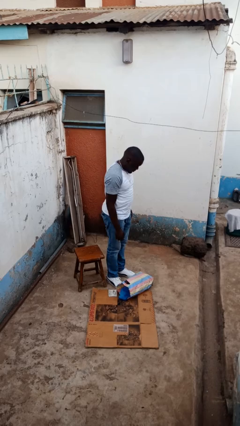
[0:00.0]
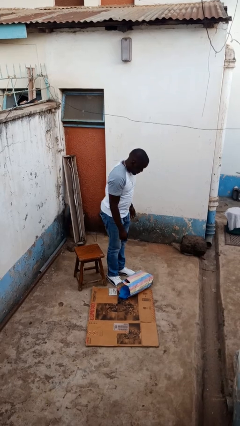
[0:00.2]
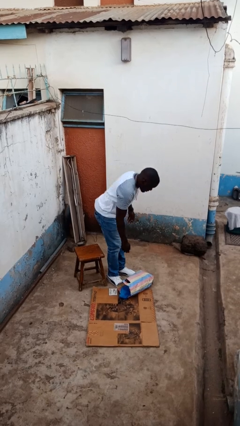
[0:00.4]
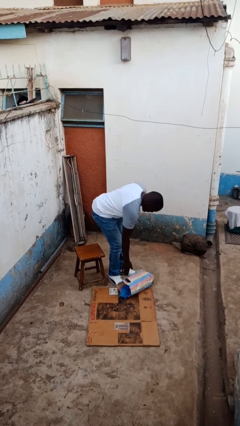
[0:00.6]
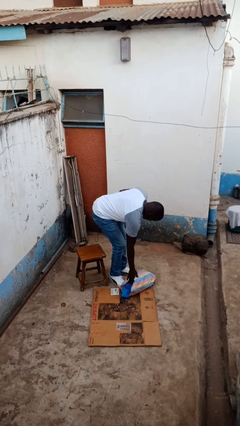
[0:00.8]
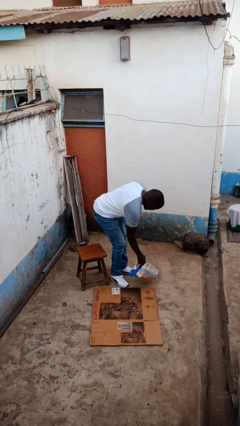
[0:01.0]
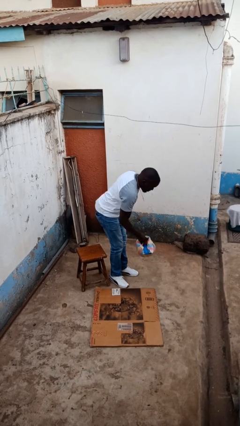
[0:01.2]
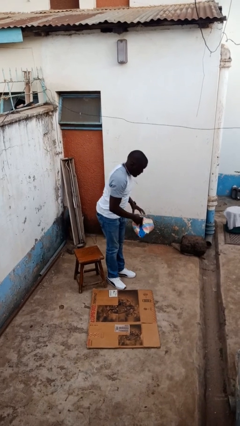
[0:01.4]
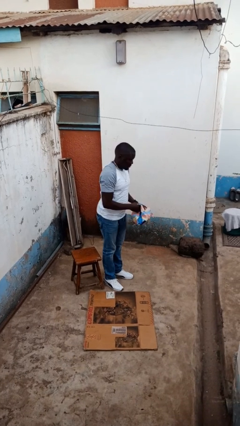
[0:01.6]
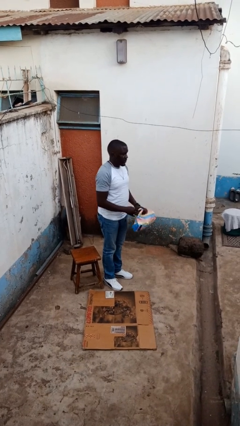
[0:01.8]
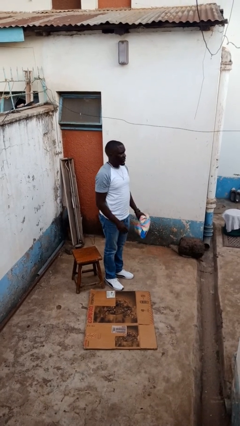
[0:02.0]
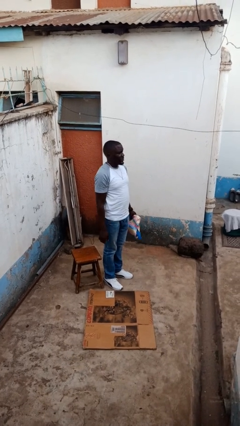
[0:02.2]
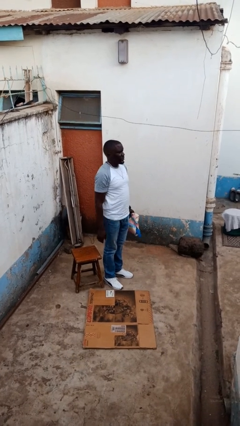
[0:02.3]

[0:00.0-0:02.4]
person picks up object from floor

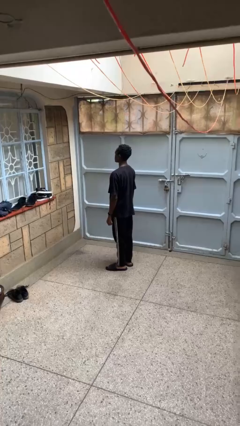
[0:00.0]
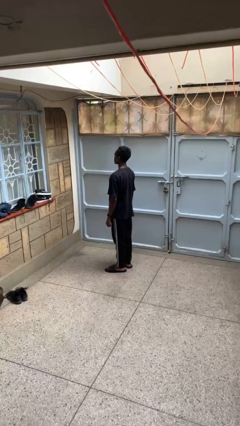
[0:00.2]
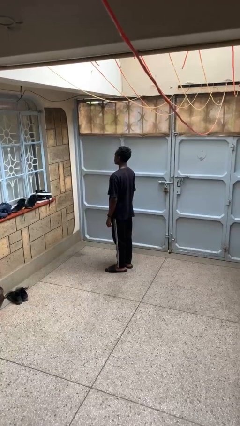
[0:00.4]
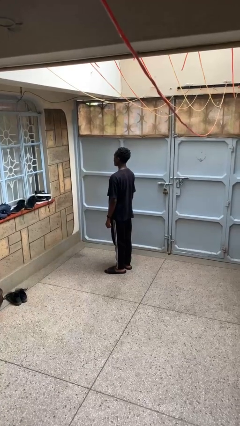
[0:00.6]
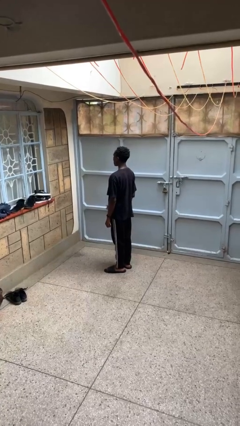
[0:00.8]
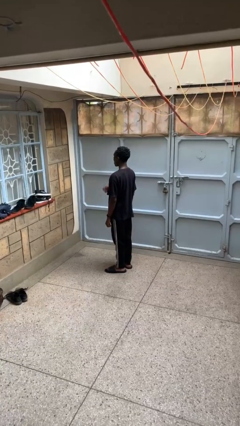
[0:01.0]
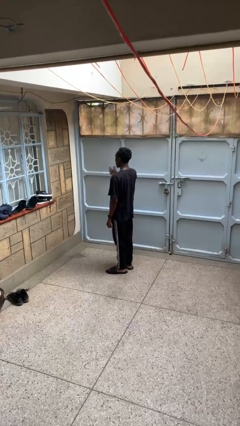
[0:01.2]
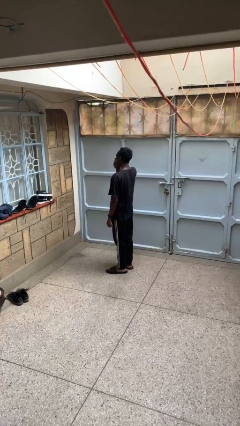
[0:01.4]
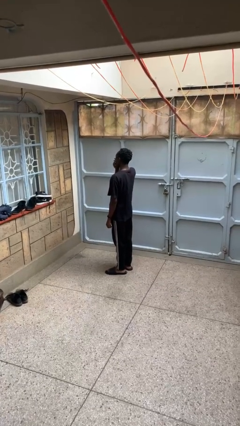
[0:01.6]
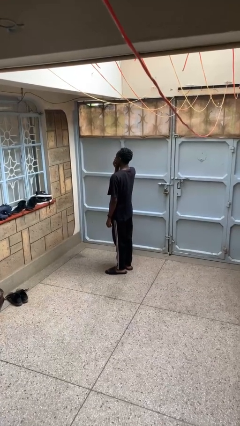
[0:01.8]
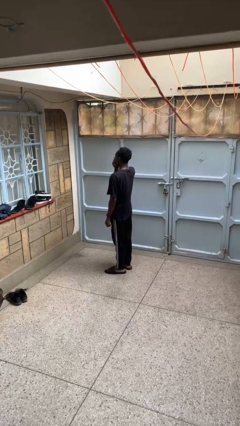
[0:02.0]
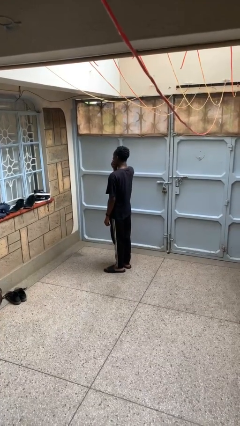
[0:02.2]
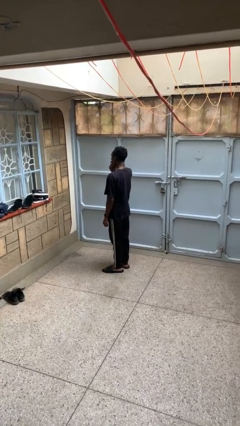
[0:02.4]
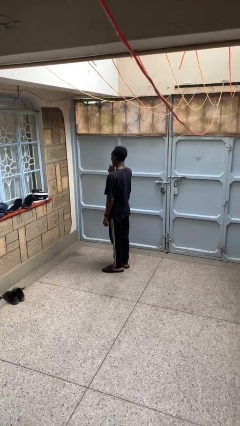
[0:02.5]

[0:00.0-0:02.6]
person yawns

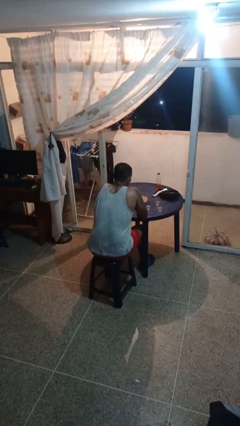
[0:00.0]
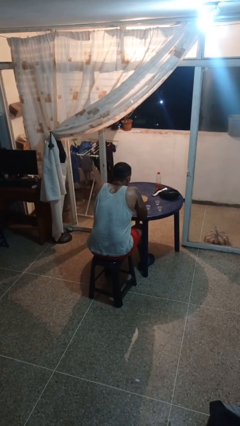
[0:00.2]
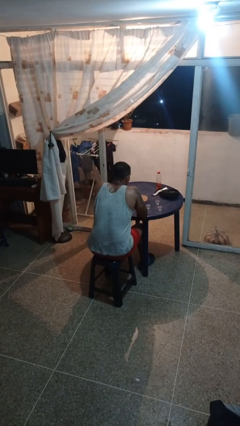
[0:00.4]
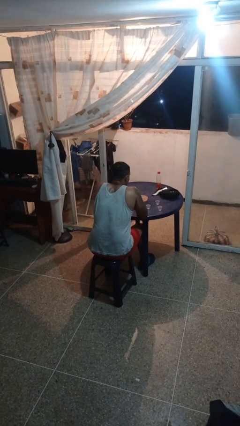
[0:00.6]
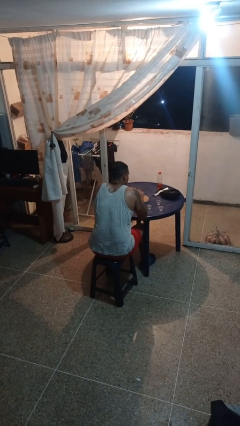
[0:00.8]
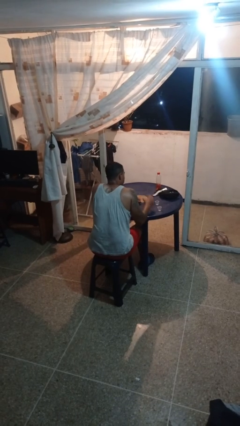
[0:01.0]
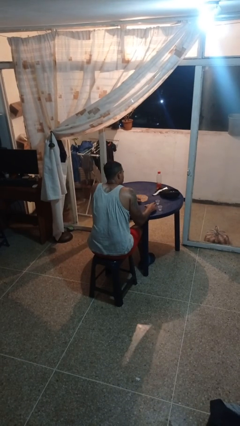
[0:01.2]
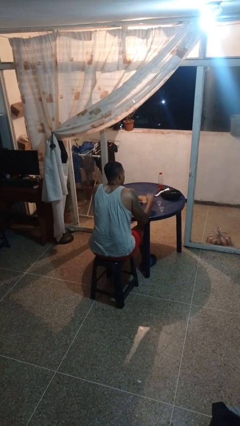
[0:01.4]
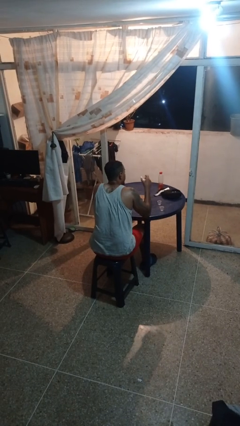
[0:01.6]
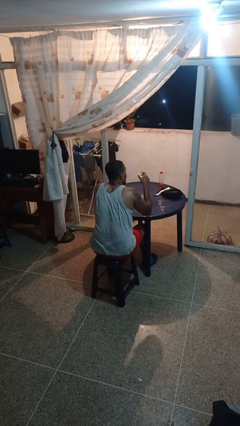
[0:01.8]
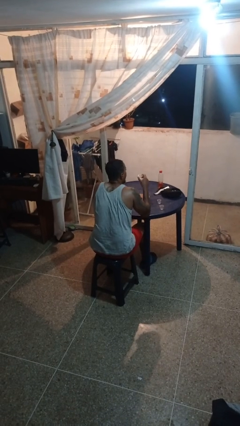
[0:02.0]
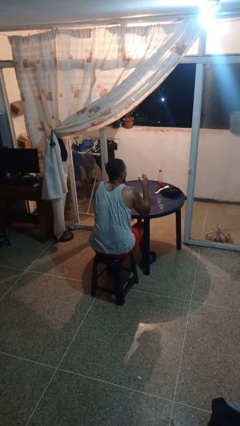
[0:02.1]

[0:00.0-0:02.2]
person picks up object from table

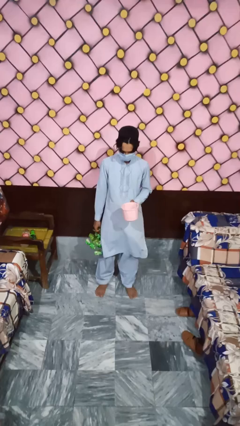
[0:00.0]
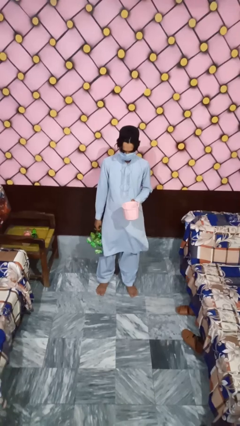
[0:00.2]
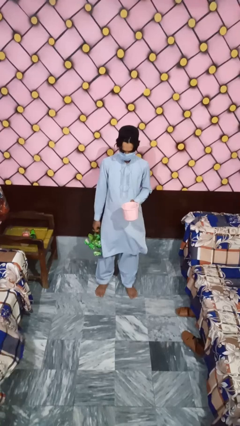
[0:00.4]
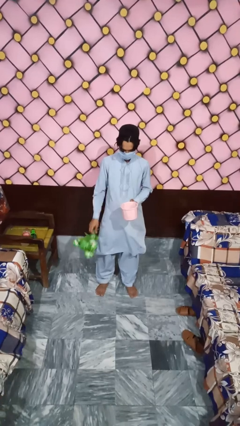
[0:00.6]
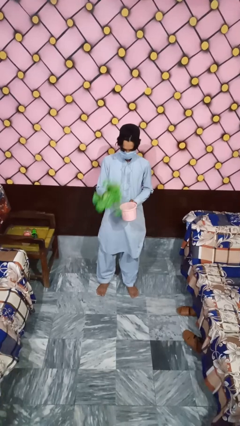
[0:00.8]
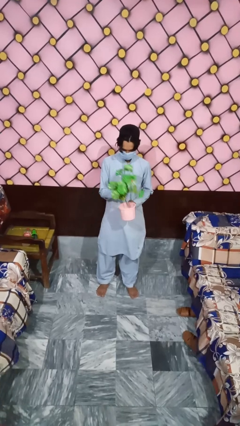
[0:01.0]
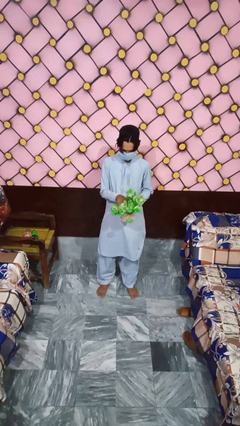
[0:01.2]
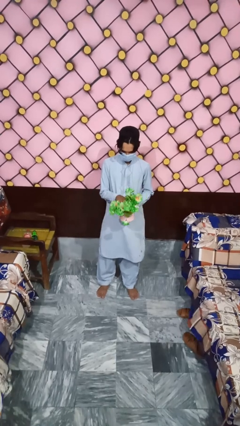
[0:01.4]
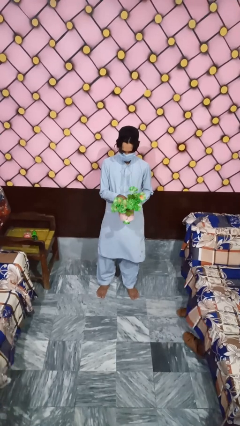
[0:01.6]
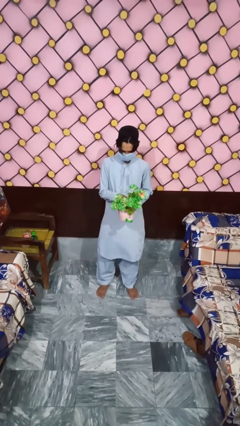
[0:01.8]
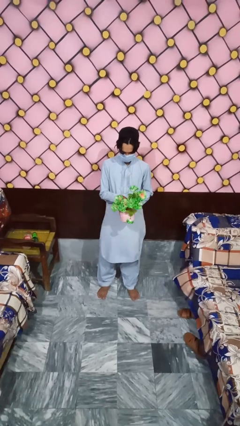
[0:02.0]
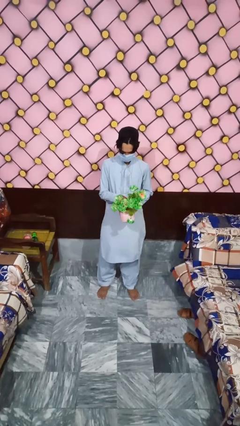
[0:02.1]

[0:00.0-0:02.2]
person arranges flowers in vase

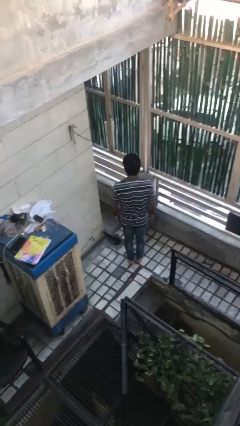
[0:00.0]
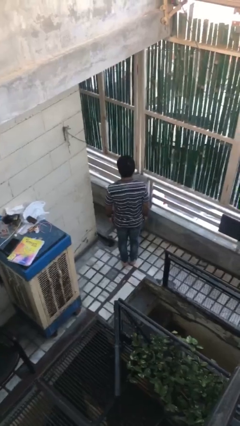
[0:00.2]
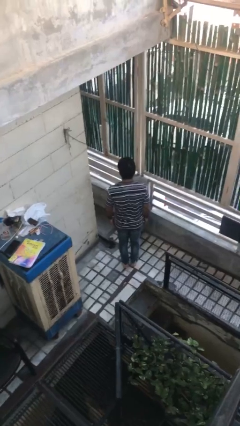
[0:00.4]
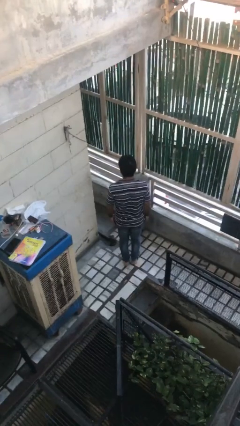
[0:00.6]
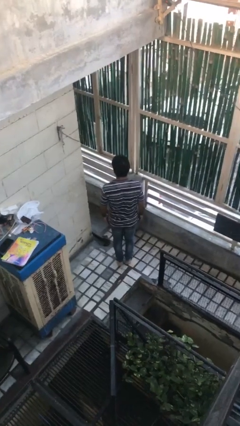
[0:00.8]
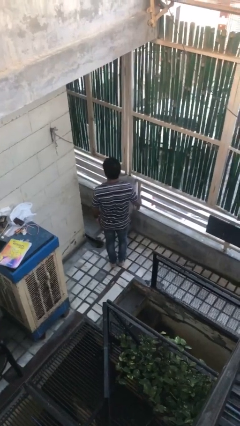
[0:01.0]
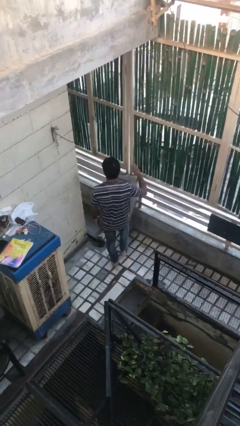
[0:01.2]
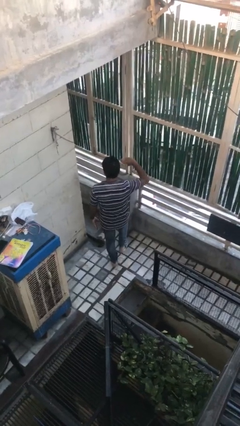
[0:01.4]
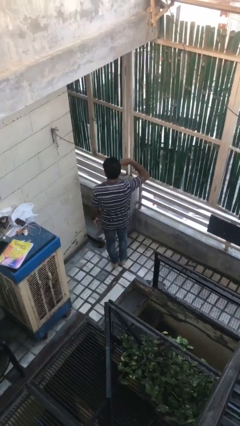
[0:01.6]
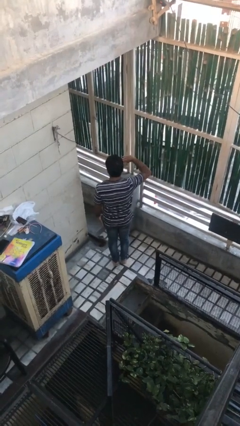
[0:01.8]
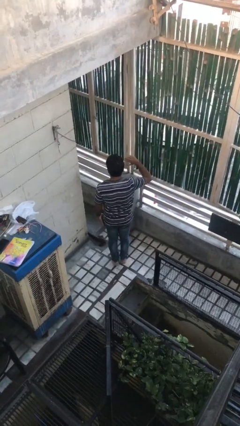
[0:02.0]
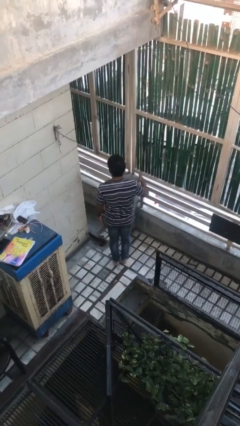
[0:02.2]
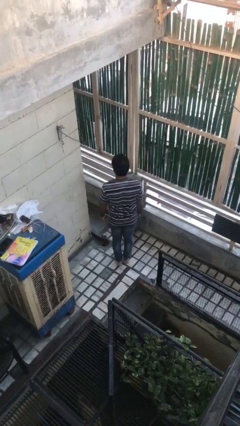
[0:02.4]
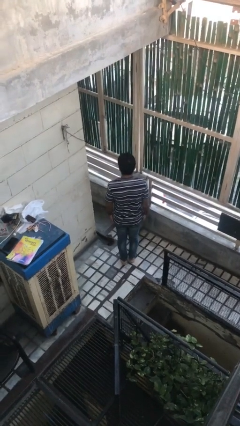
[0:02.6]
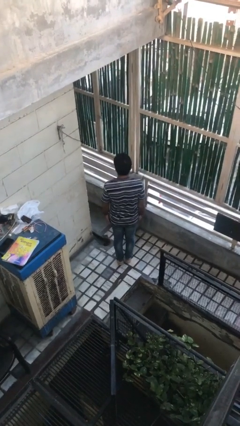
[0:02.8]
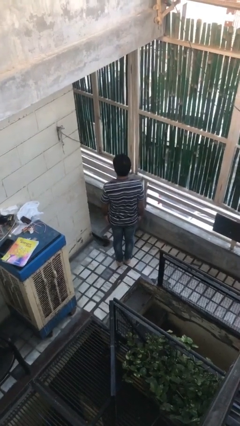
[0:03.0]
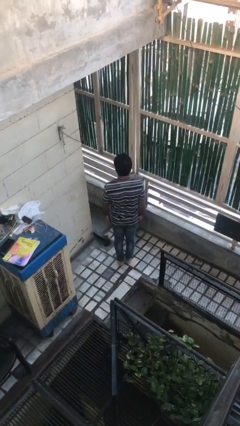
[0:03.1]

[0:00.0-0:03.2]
person salutes

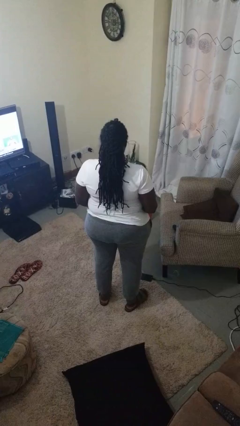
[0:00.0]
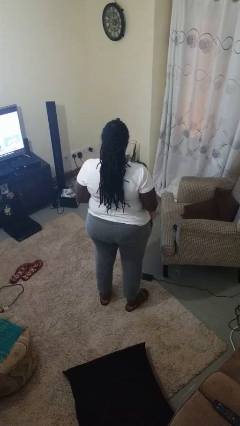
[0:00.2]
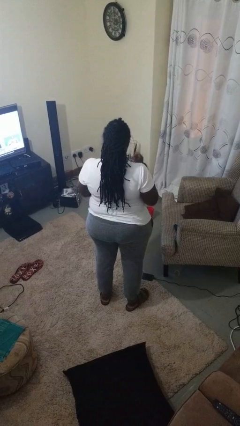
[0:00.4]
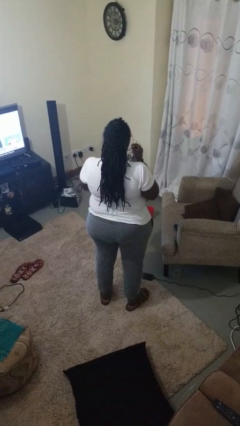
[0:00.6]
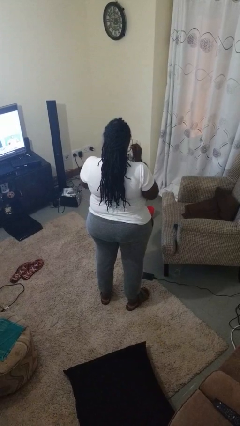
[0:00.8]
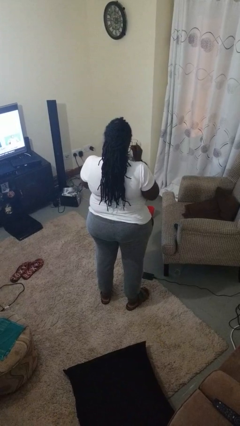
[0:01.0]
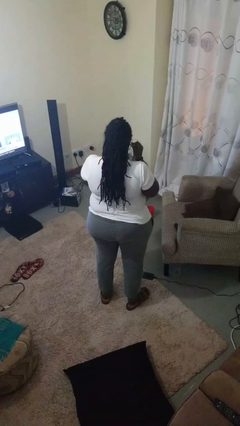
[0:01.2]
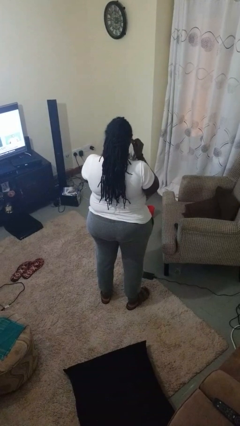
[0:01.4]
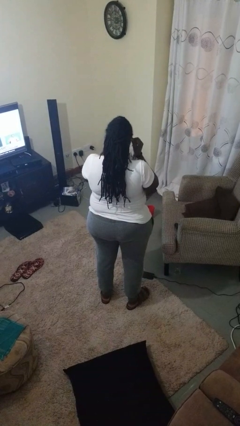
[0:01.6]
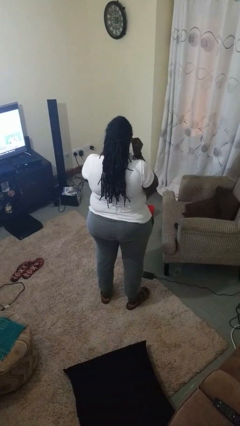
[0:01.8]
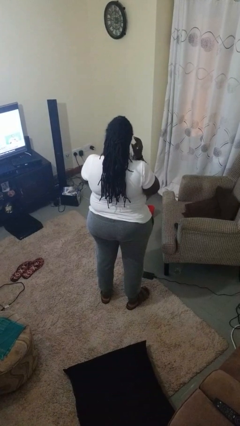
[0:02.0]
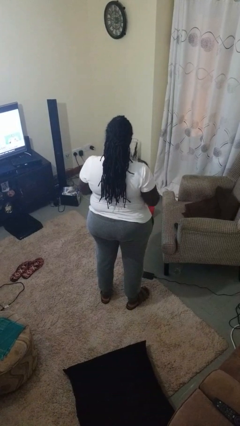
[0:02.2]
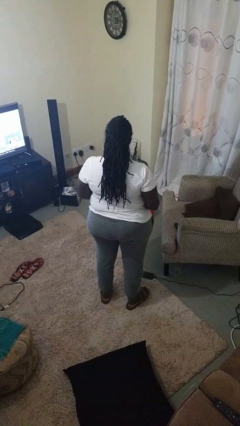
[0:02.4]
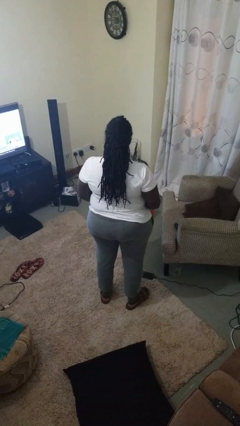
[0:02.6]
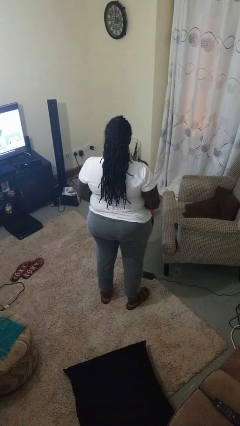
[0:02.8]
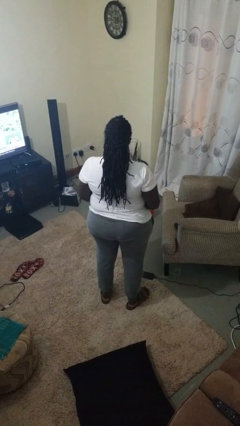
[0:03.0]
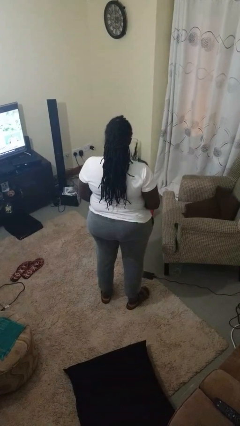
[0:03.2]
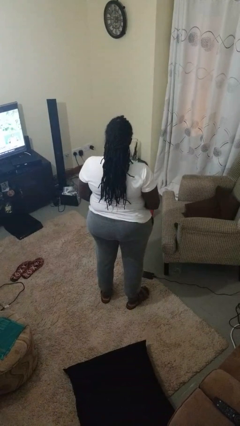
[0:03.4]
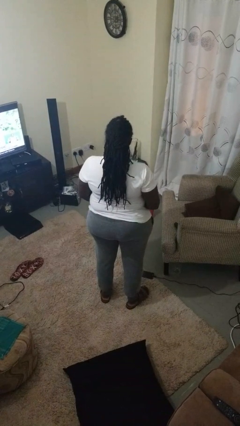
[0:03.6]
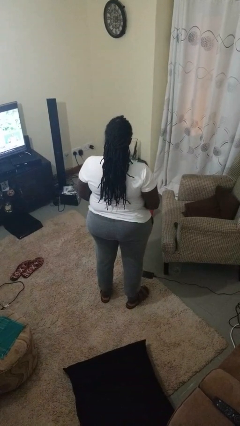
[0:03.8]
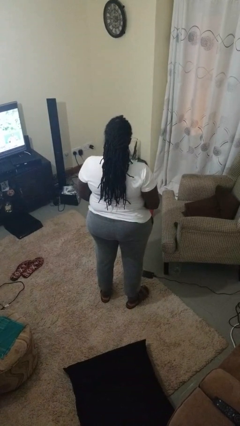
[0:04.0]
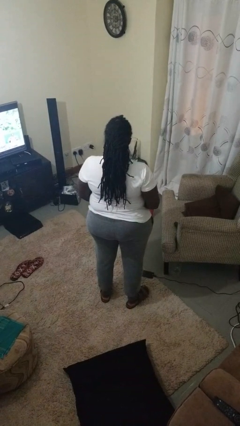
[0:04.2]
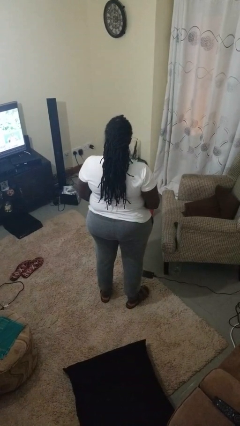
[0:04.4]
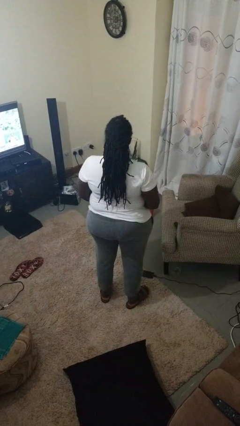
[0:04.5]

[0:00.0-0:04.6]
person puts on sunglasses
